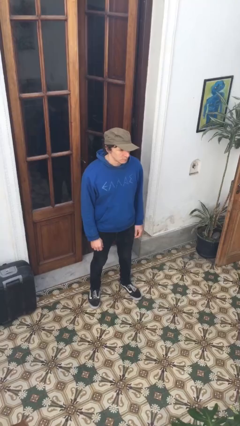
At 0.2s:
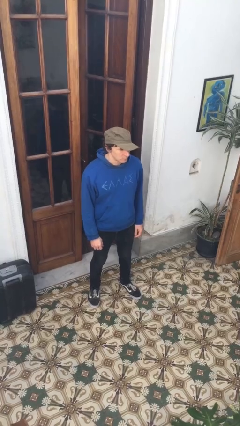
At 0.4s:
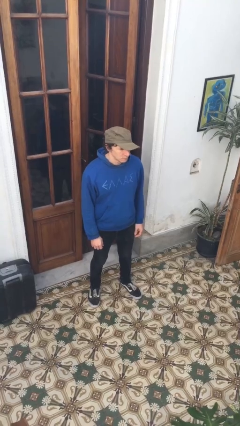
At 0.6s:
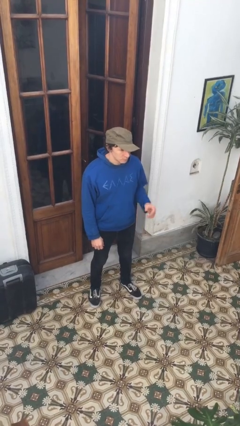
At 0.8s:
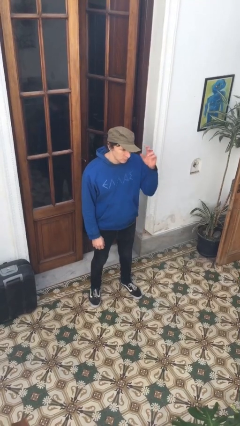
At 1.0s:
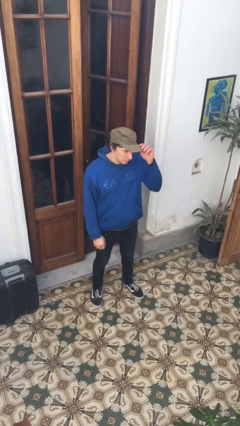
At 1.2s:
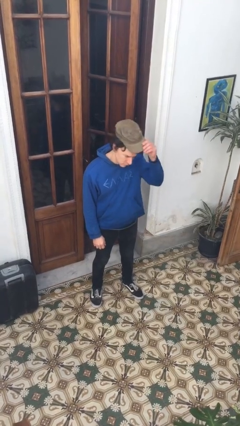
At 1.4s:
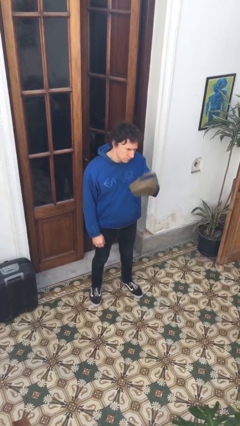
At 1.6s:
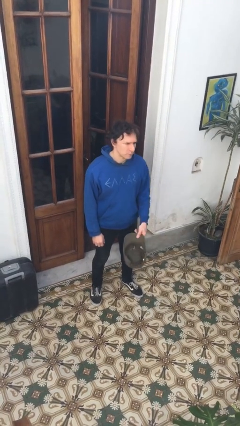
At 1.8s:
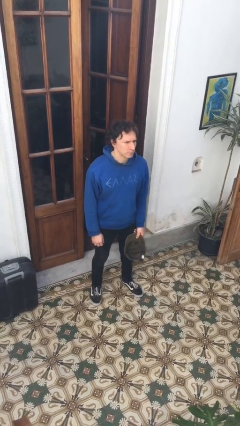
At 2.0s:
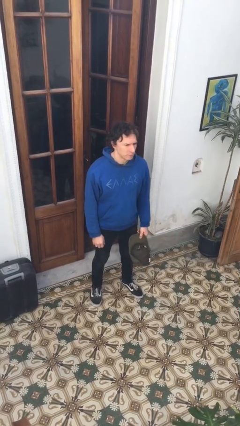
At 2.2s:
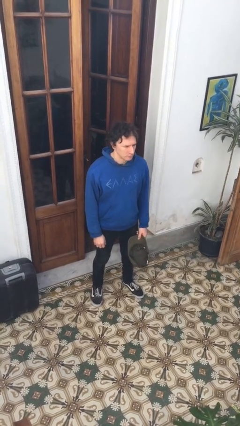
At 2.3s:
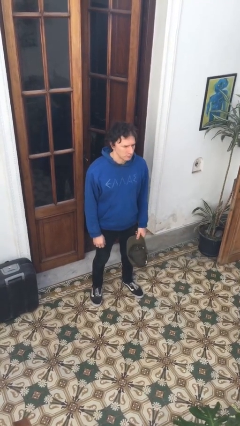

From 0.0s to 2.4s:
person takes off hat

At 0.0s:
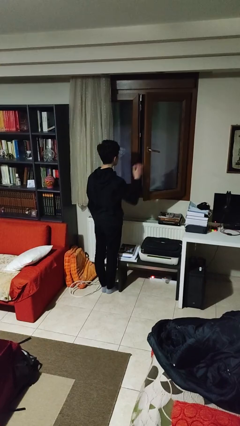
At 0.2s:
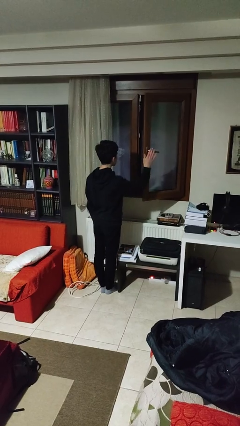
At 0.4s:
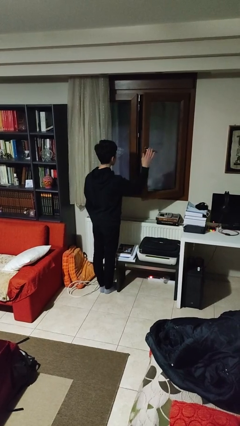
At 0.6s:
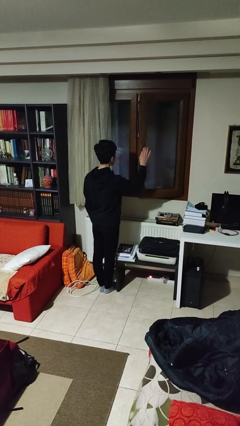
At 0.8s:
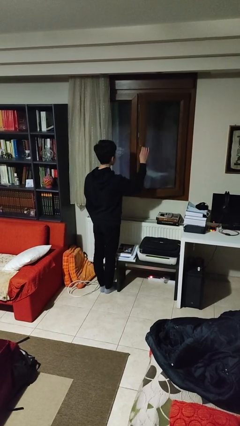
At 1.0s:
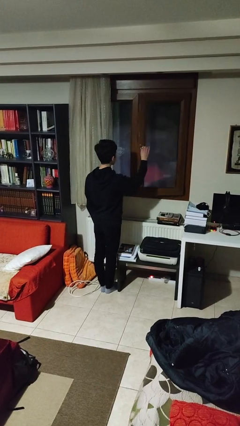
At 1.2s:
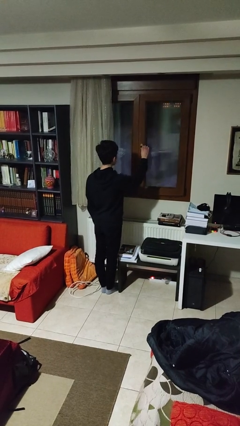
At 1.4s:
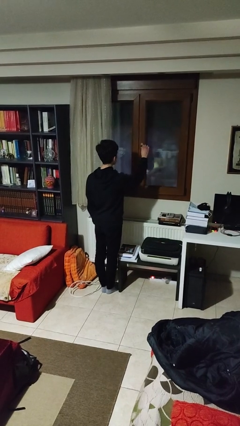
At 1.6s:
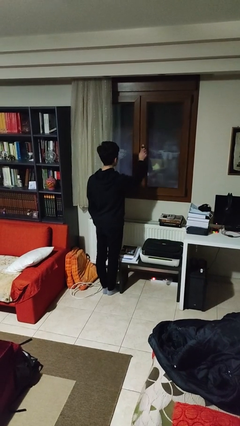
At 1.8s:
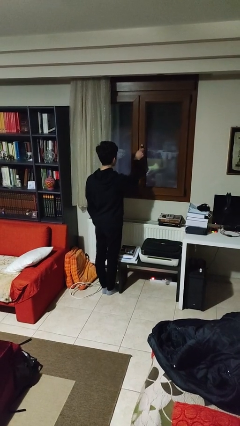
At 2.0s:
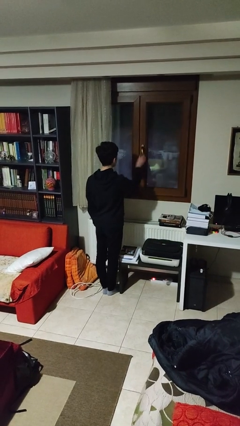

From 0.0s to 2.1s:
person closes home window

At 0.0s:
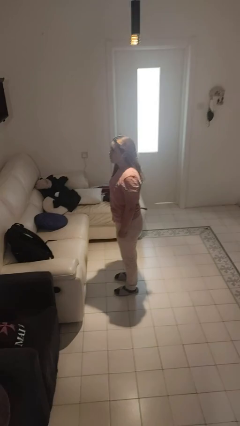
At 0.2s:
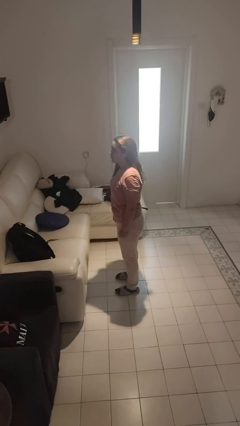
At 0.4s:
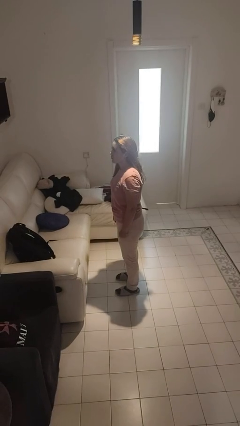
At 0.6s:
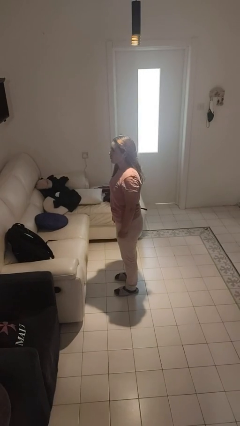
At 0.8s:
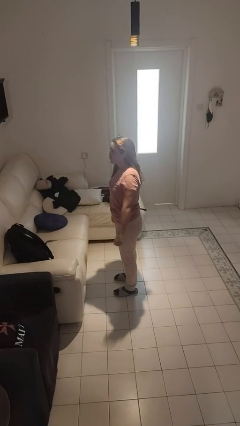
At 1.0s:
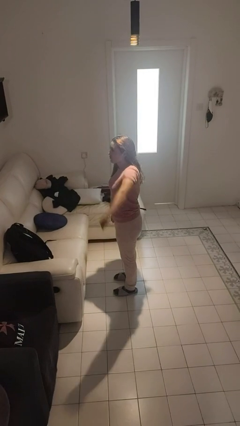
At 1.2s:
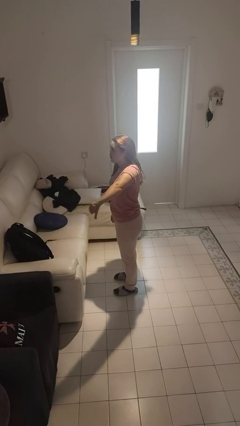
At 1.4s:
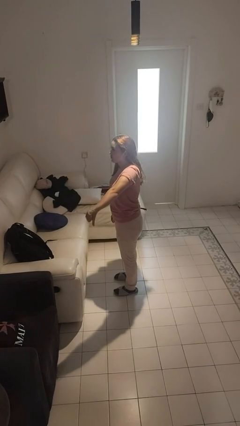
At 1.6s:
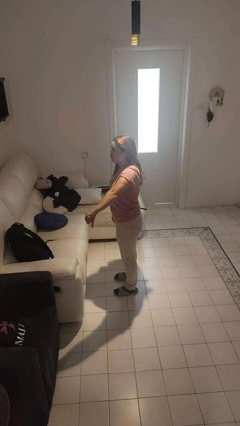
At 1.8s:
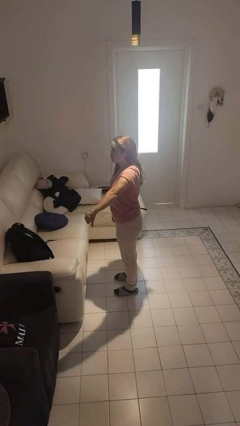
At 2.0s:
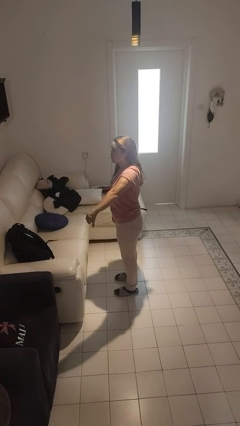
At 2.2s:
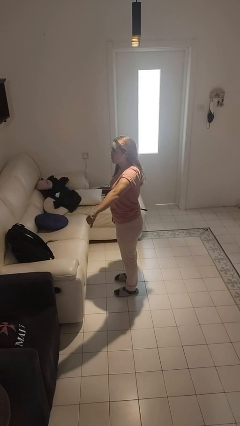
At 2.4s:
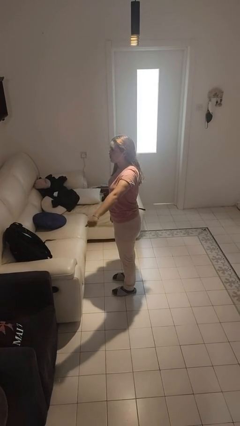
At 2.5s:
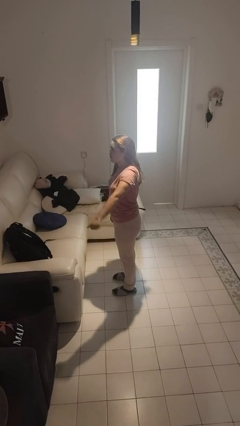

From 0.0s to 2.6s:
person gestures thumbs down

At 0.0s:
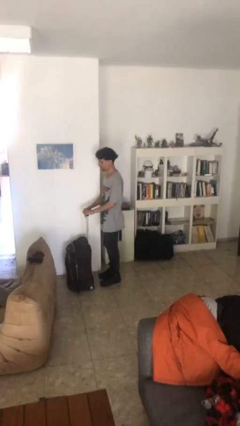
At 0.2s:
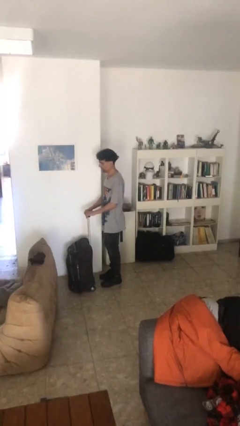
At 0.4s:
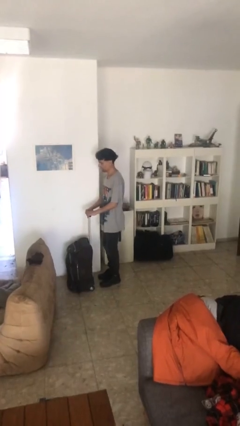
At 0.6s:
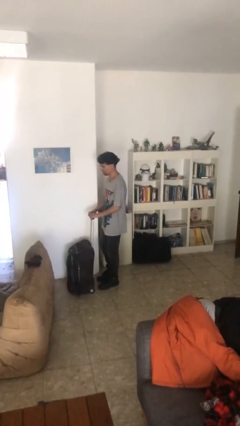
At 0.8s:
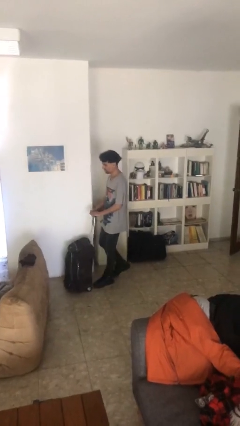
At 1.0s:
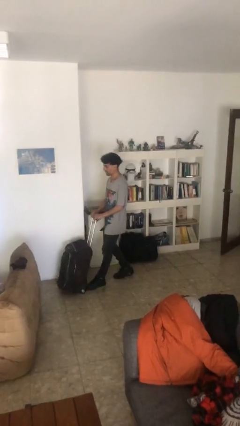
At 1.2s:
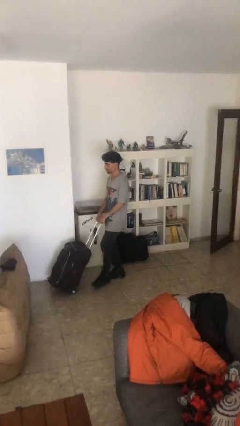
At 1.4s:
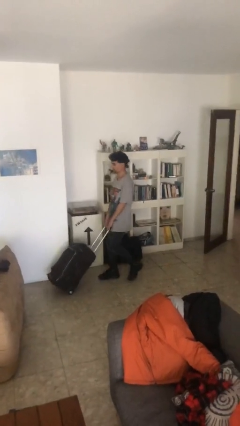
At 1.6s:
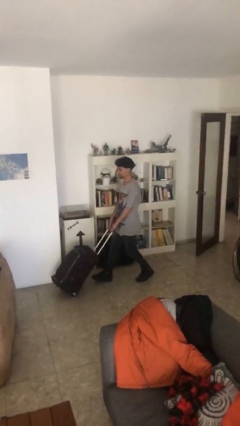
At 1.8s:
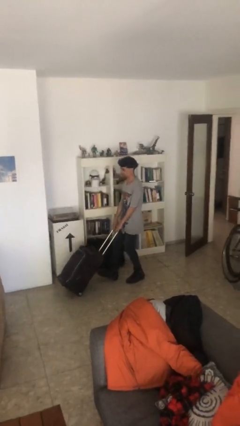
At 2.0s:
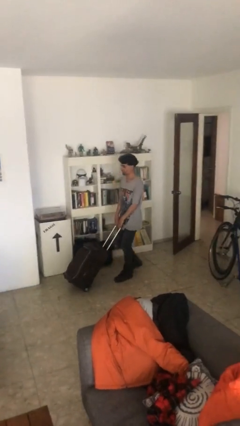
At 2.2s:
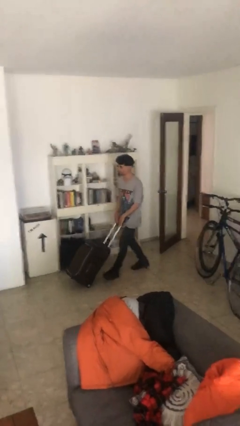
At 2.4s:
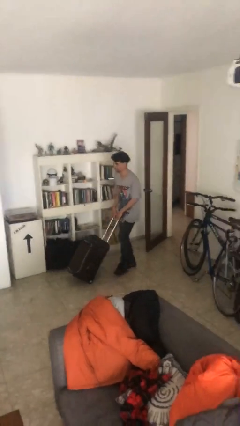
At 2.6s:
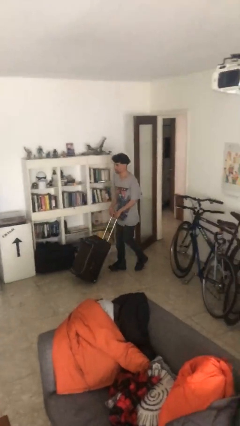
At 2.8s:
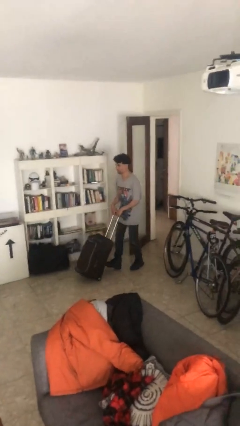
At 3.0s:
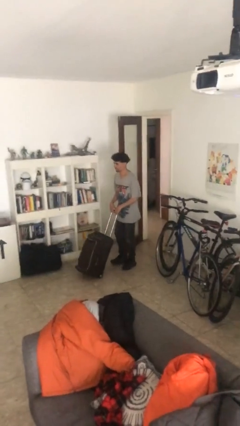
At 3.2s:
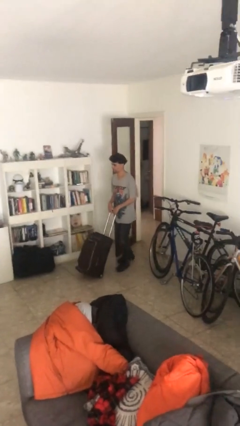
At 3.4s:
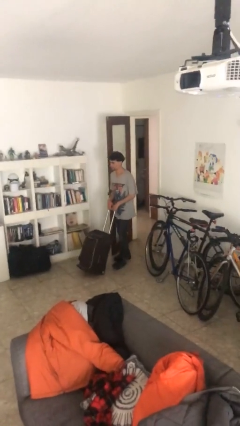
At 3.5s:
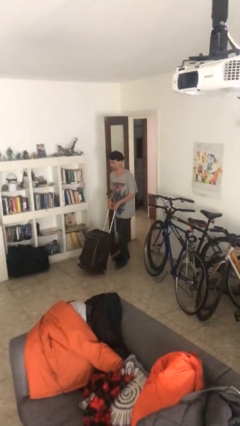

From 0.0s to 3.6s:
person pulls wheeled cart

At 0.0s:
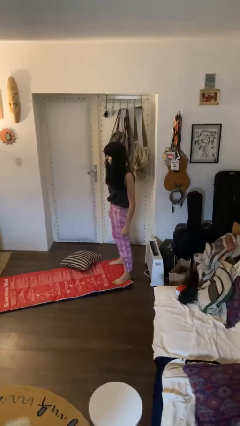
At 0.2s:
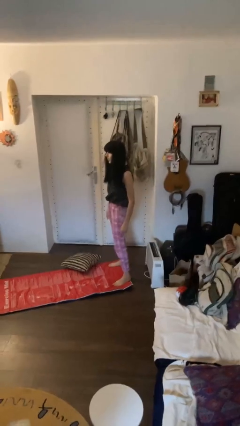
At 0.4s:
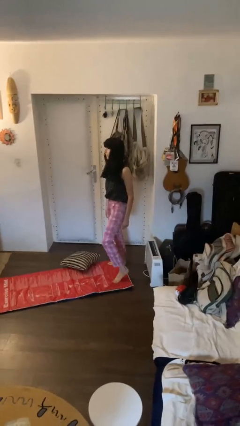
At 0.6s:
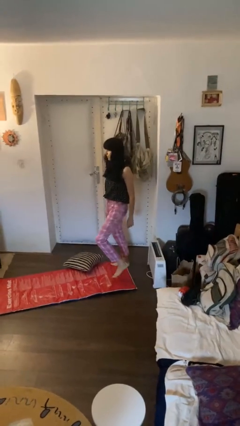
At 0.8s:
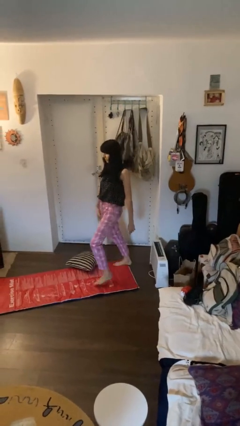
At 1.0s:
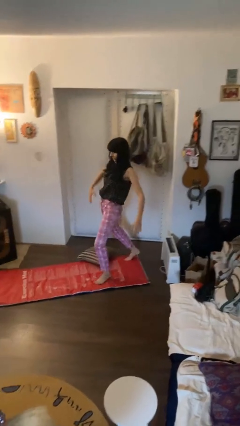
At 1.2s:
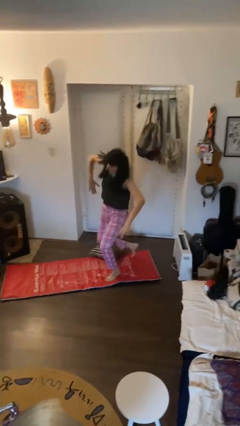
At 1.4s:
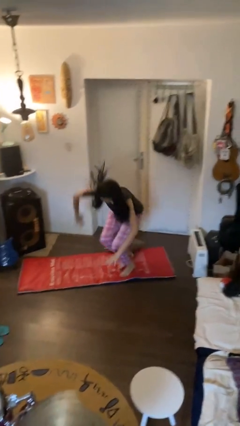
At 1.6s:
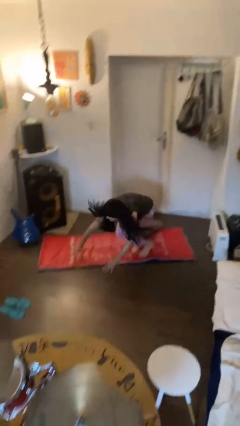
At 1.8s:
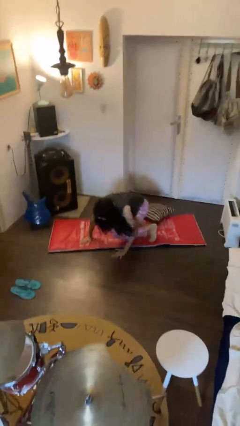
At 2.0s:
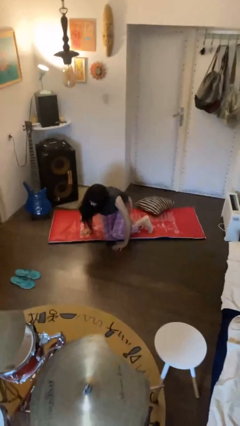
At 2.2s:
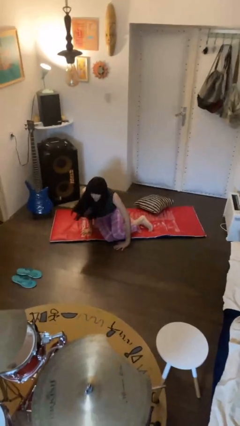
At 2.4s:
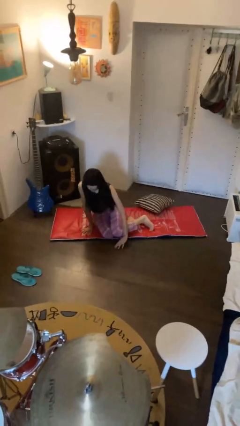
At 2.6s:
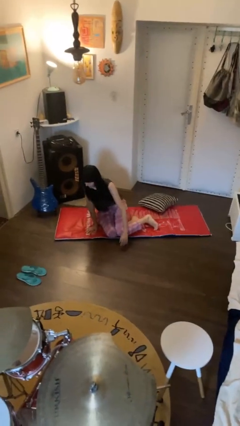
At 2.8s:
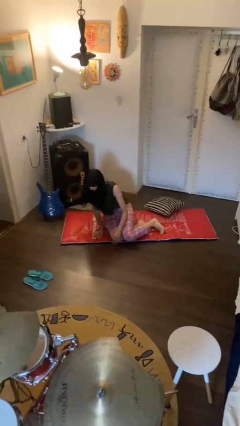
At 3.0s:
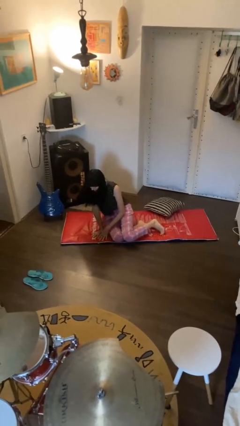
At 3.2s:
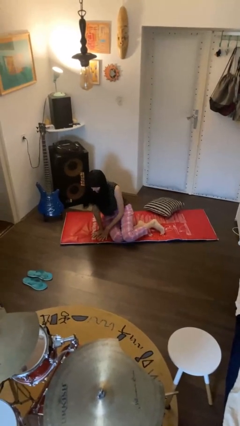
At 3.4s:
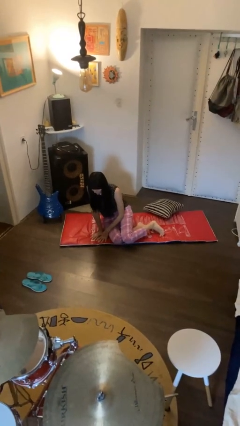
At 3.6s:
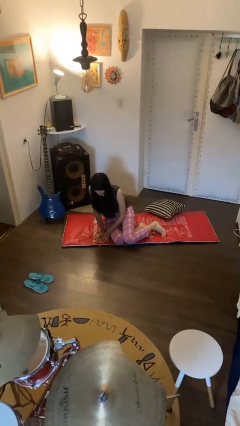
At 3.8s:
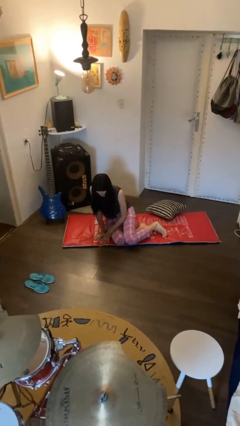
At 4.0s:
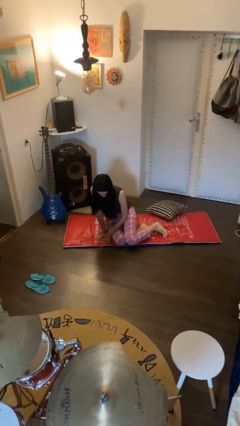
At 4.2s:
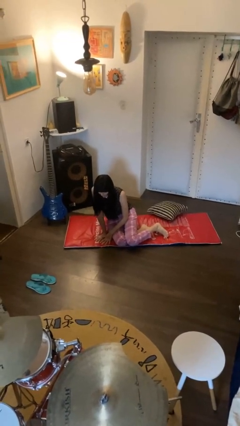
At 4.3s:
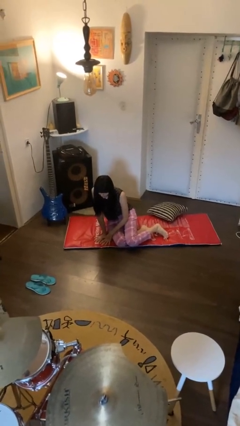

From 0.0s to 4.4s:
person trips on object on floor

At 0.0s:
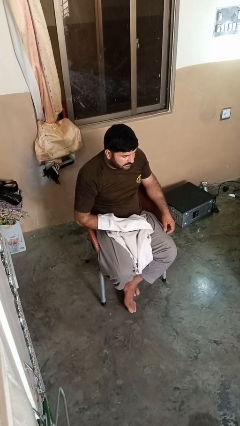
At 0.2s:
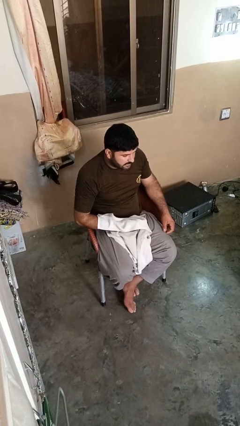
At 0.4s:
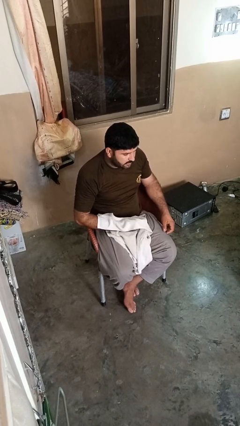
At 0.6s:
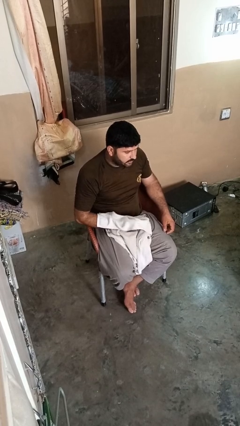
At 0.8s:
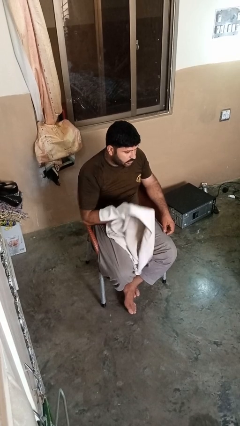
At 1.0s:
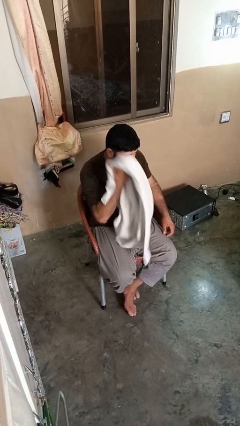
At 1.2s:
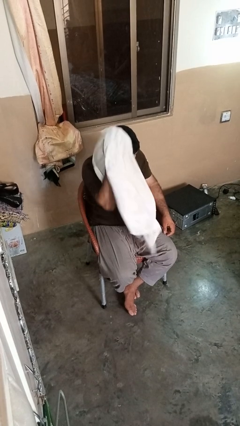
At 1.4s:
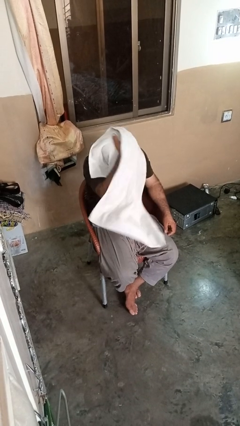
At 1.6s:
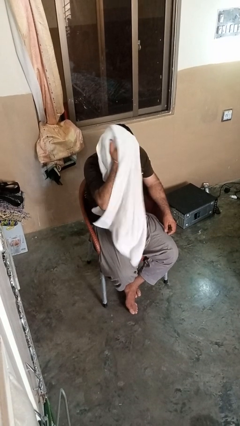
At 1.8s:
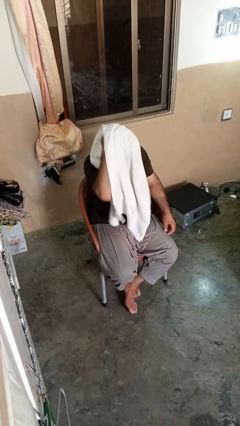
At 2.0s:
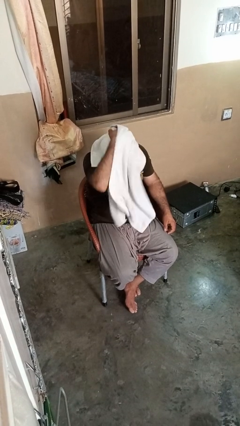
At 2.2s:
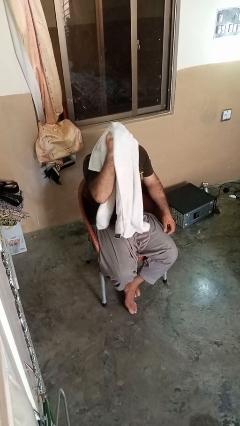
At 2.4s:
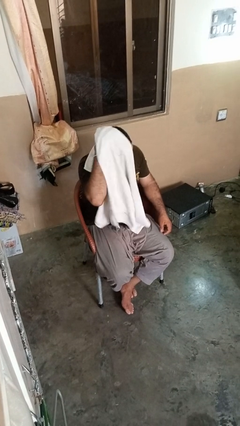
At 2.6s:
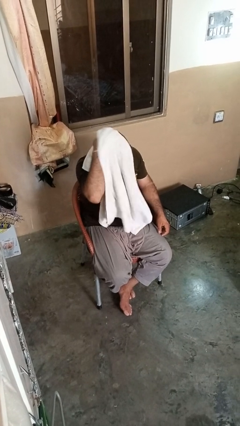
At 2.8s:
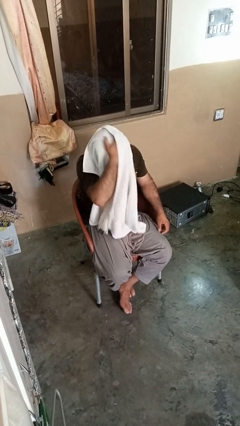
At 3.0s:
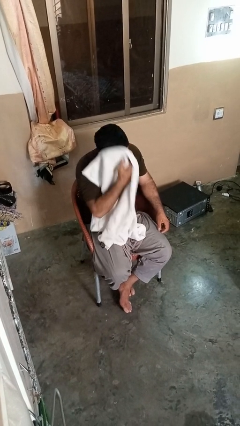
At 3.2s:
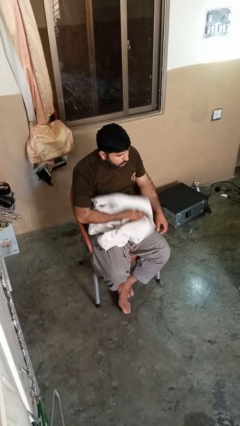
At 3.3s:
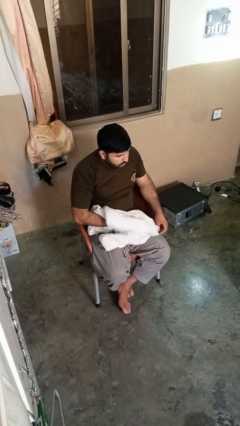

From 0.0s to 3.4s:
person dries hair with towel
